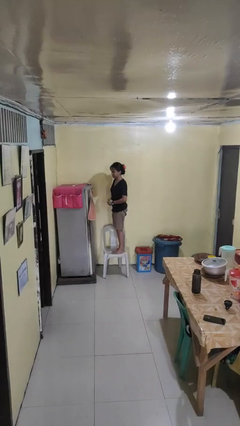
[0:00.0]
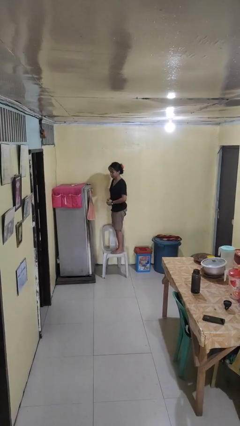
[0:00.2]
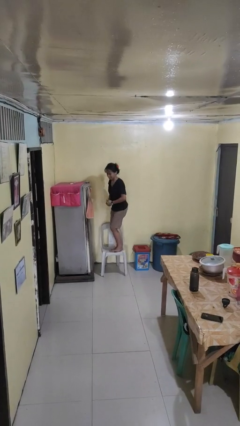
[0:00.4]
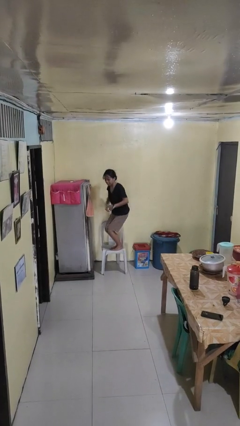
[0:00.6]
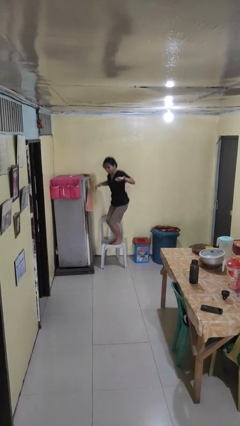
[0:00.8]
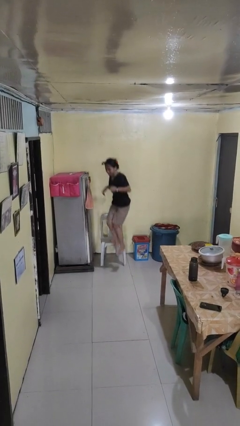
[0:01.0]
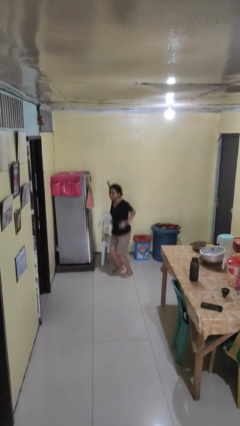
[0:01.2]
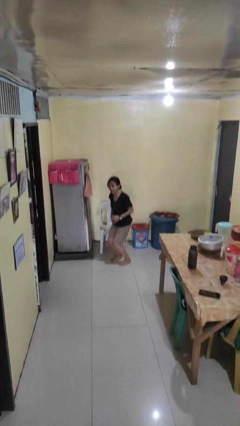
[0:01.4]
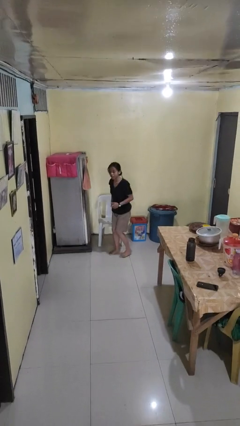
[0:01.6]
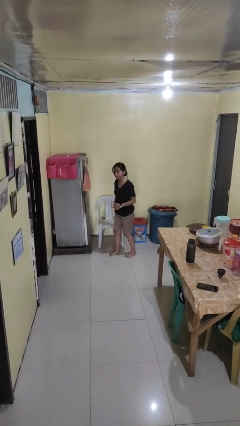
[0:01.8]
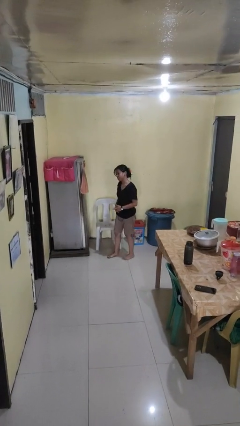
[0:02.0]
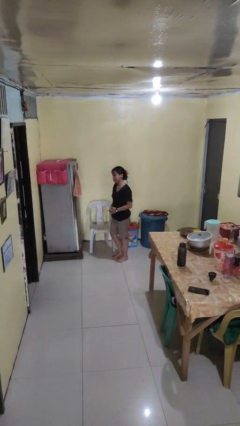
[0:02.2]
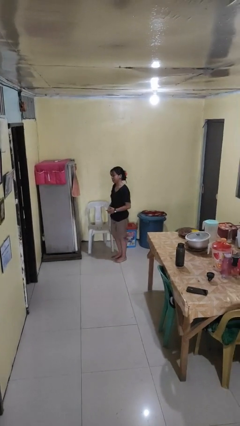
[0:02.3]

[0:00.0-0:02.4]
person climbs off chair

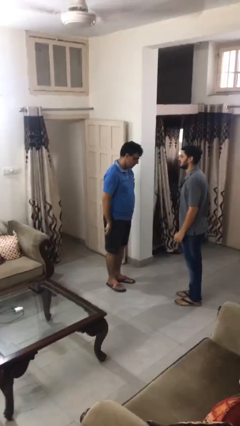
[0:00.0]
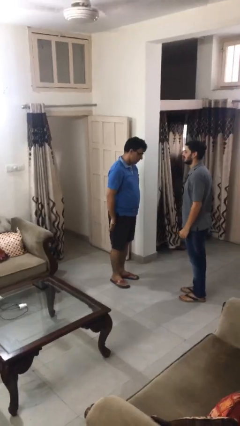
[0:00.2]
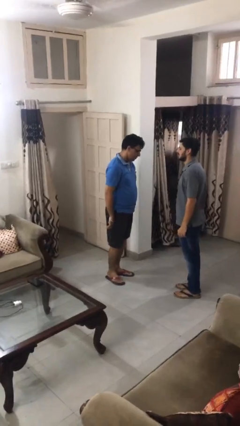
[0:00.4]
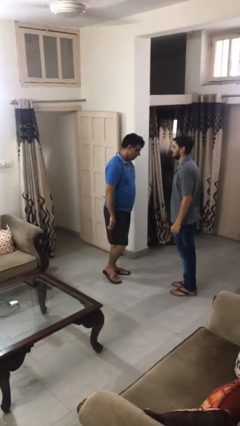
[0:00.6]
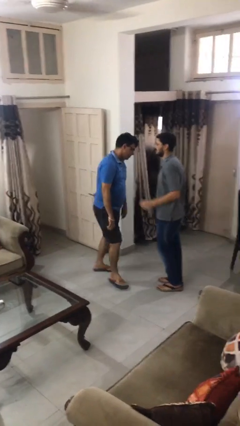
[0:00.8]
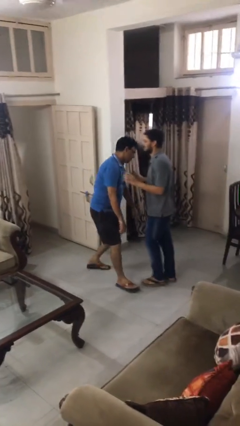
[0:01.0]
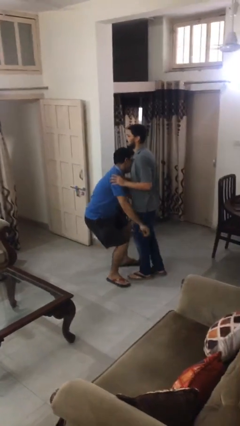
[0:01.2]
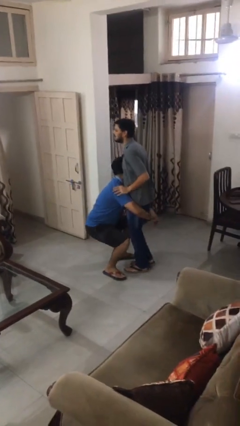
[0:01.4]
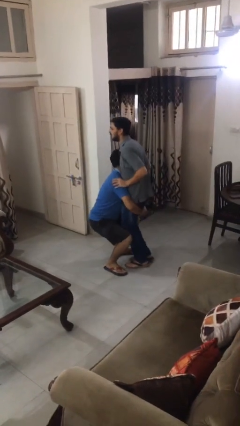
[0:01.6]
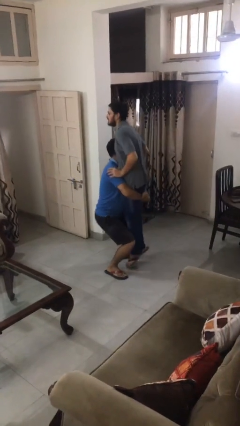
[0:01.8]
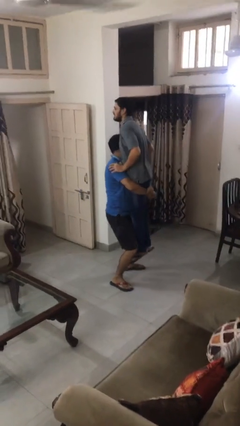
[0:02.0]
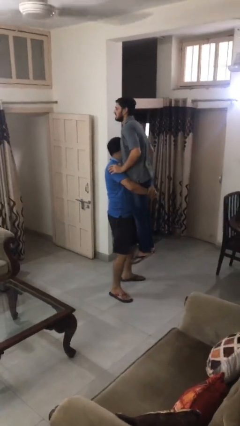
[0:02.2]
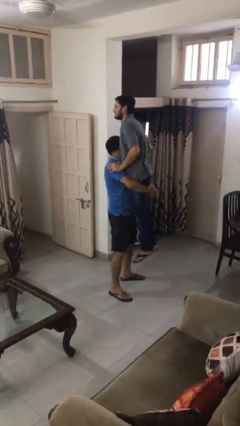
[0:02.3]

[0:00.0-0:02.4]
person picks up person

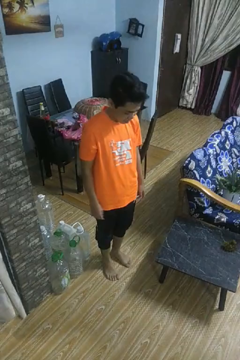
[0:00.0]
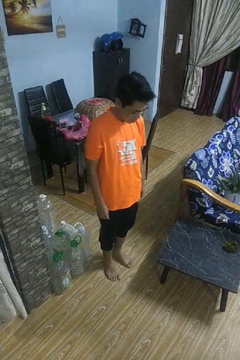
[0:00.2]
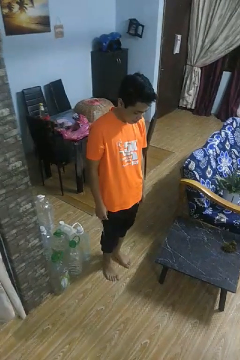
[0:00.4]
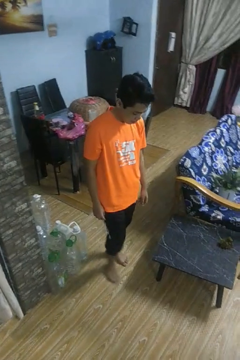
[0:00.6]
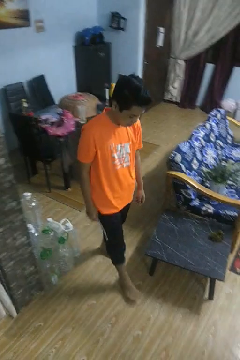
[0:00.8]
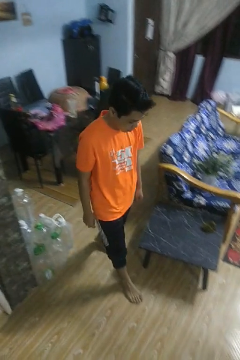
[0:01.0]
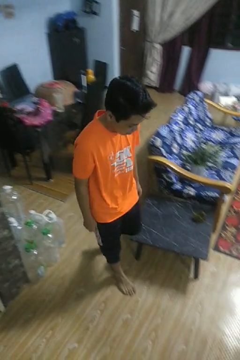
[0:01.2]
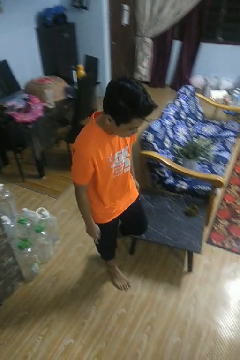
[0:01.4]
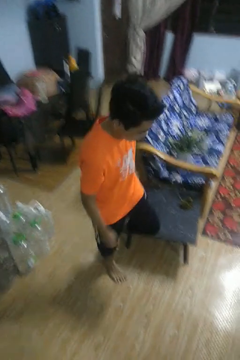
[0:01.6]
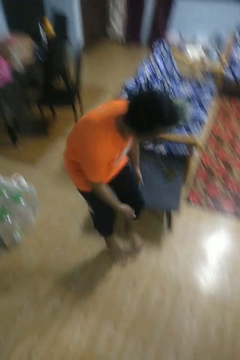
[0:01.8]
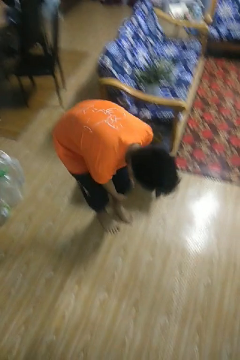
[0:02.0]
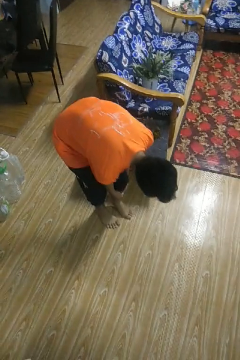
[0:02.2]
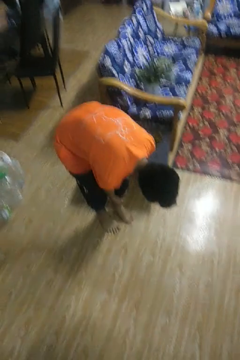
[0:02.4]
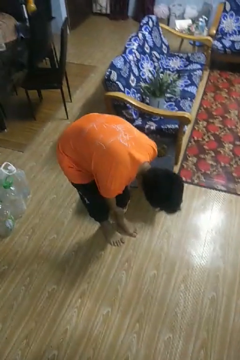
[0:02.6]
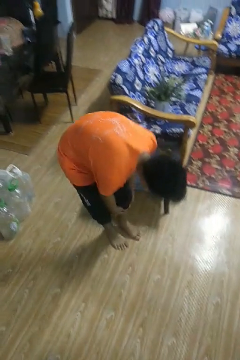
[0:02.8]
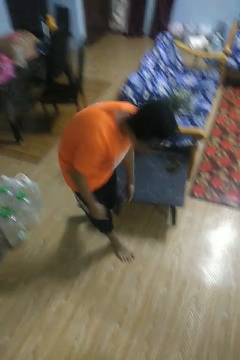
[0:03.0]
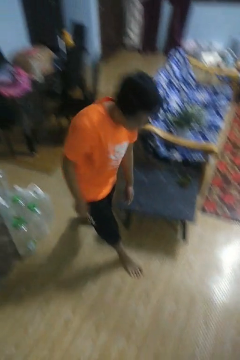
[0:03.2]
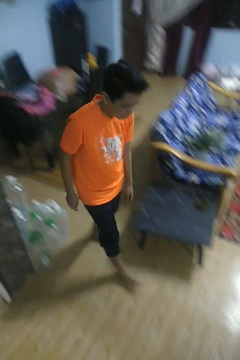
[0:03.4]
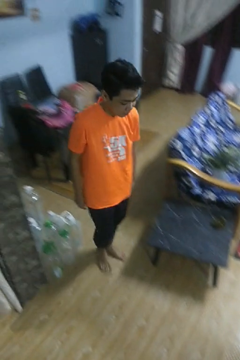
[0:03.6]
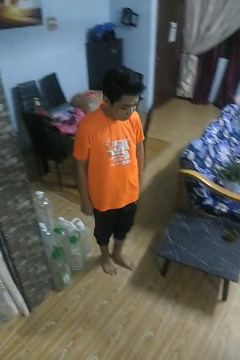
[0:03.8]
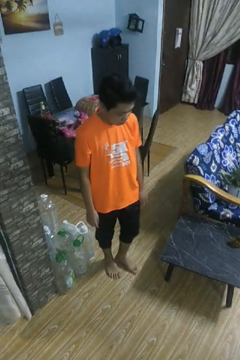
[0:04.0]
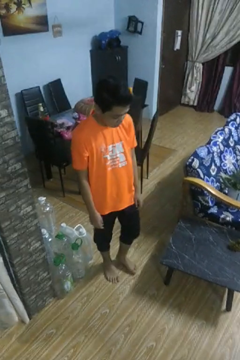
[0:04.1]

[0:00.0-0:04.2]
person bumps into table

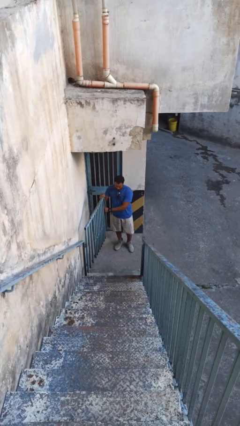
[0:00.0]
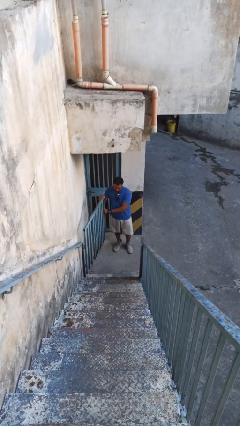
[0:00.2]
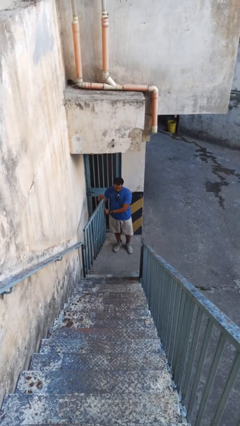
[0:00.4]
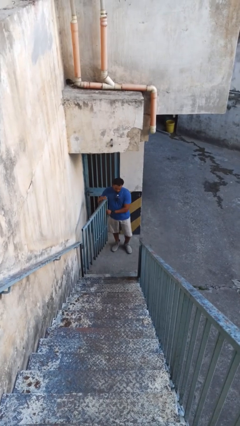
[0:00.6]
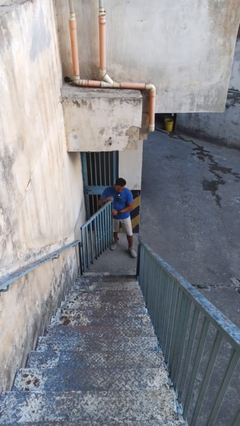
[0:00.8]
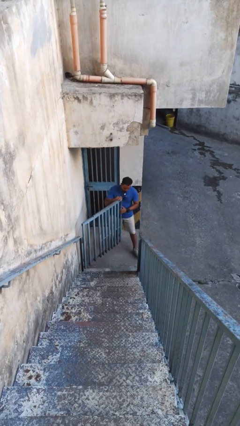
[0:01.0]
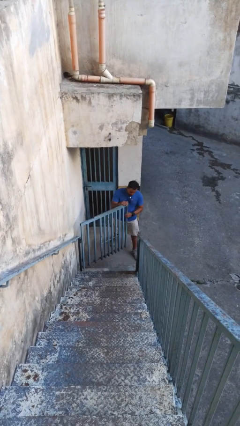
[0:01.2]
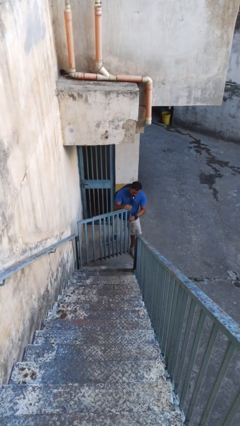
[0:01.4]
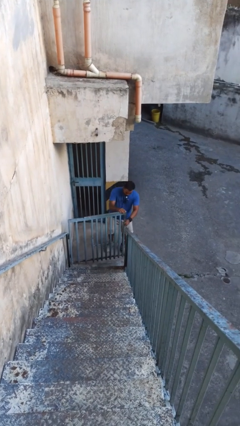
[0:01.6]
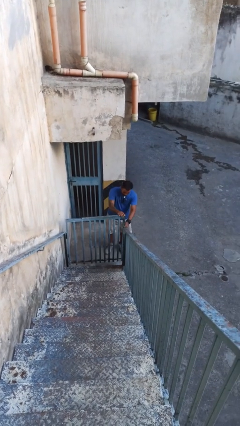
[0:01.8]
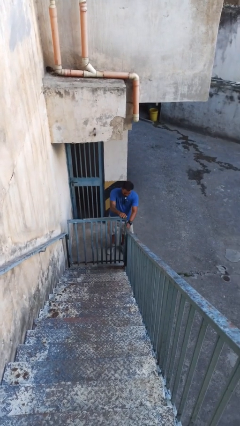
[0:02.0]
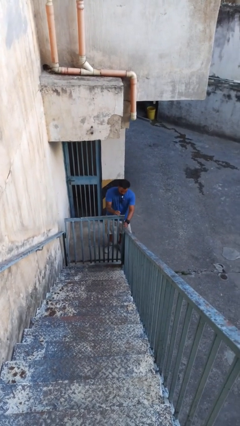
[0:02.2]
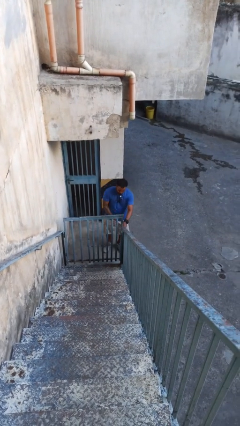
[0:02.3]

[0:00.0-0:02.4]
person closes facility door

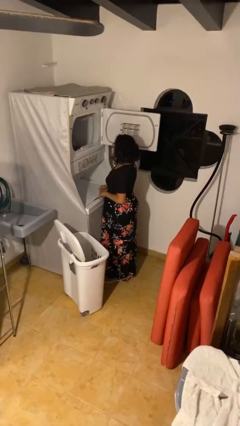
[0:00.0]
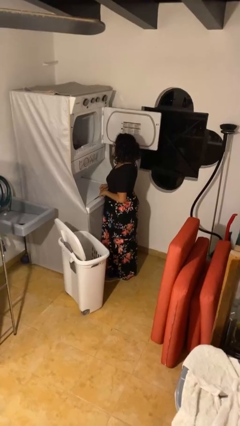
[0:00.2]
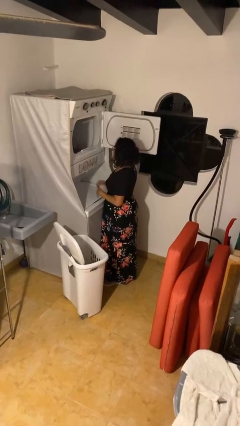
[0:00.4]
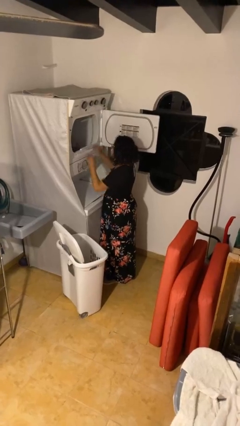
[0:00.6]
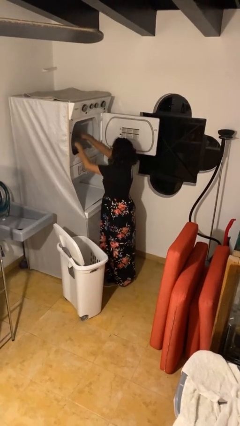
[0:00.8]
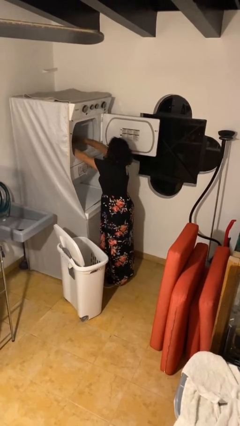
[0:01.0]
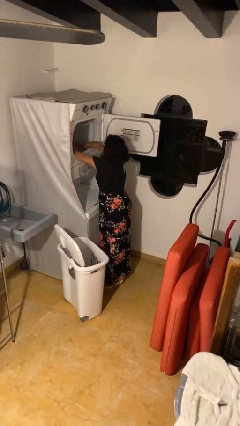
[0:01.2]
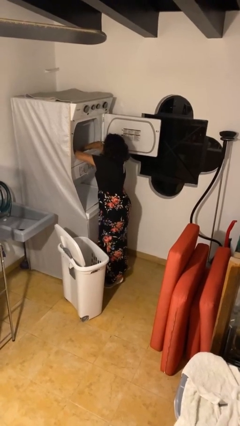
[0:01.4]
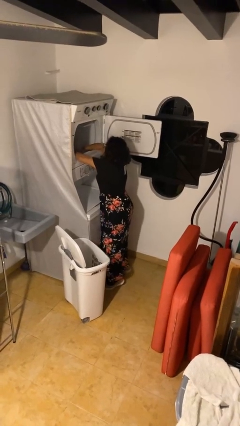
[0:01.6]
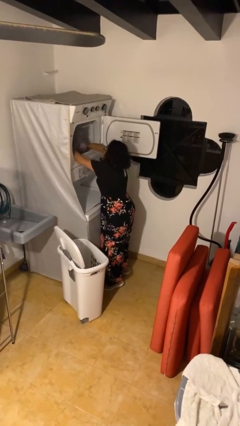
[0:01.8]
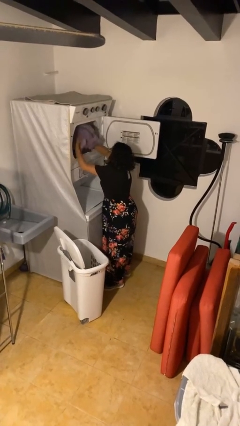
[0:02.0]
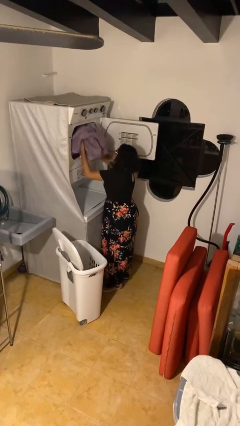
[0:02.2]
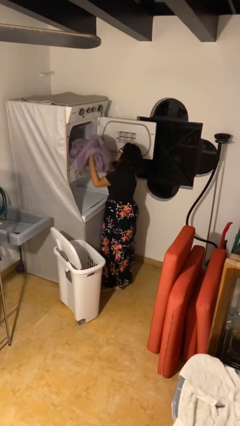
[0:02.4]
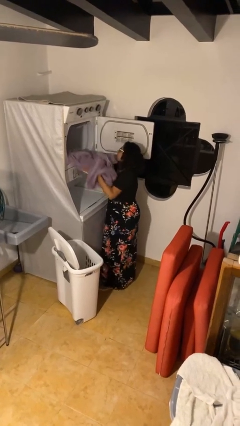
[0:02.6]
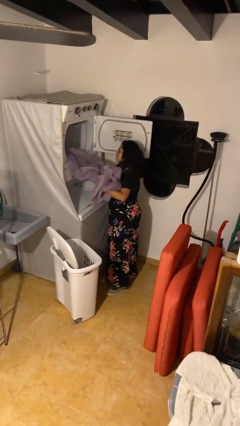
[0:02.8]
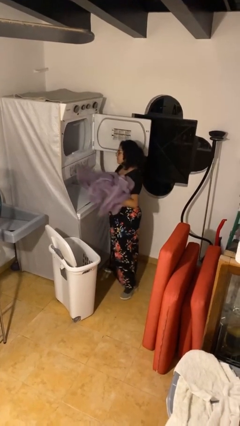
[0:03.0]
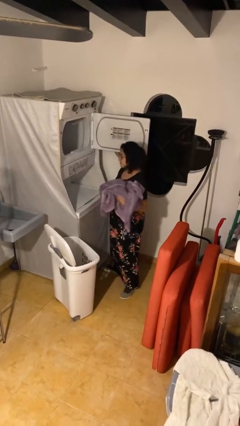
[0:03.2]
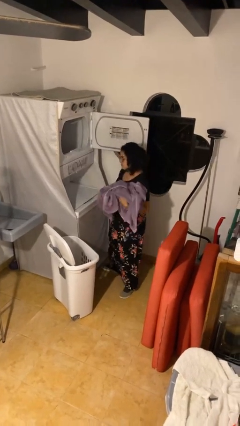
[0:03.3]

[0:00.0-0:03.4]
person unloads dryer

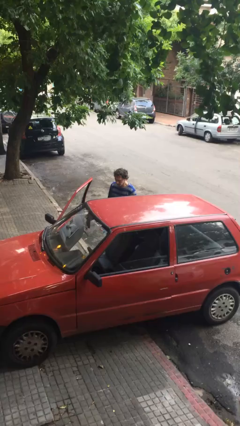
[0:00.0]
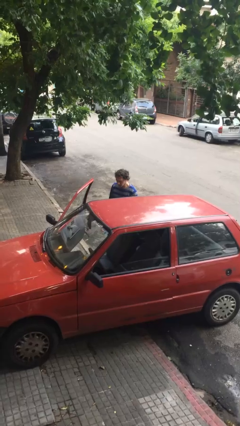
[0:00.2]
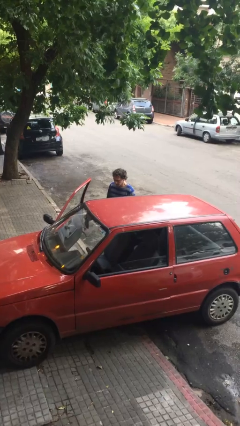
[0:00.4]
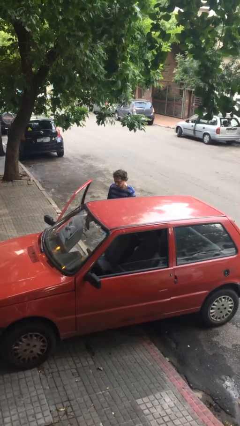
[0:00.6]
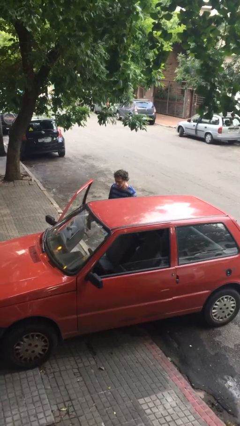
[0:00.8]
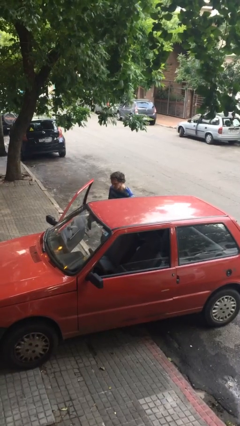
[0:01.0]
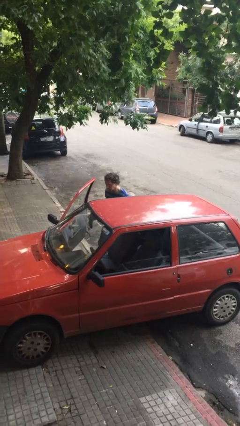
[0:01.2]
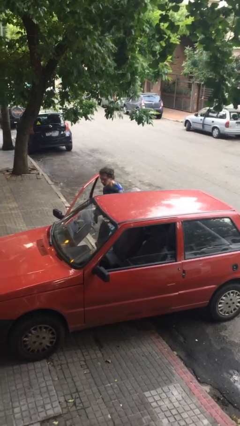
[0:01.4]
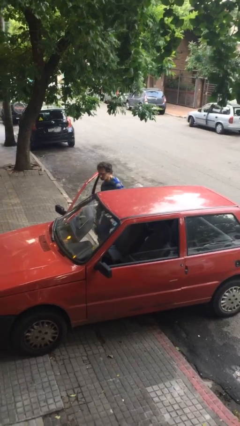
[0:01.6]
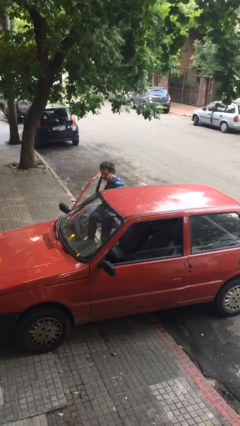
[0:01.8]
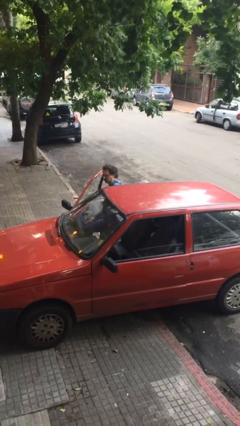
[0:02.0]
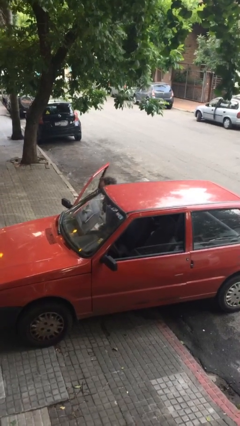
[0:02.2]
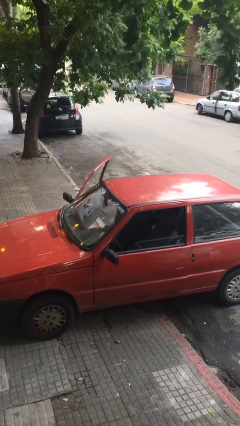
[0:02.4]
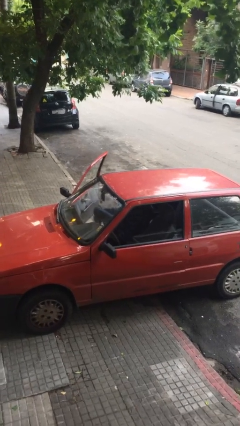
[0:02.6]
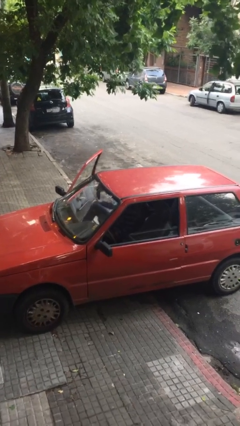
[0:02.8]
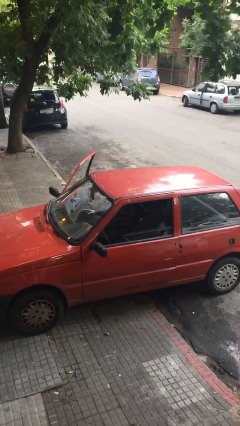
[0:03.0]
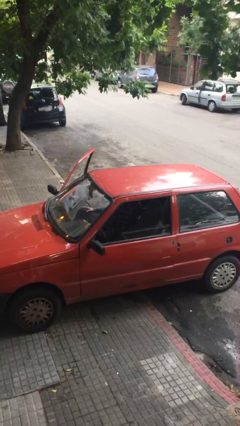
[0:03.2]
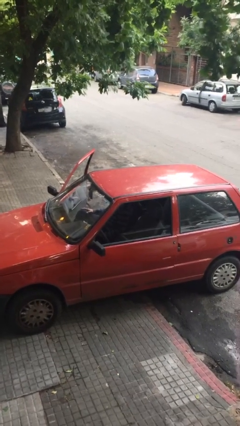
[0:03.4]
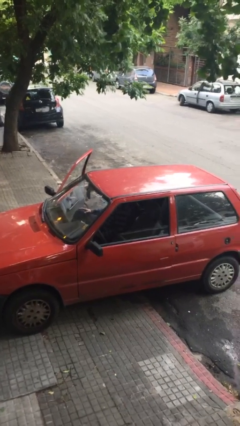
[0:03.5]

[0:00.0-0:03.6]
person enters car
